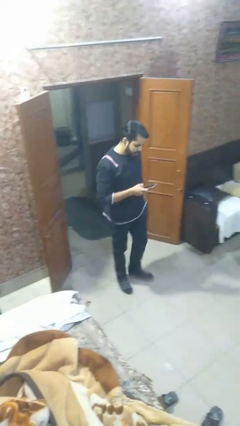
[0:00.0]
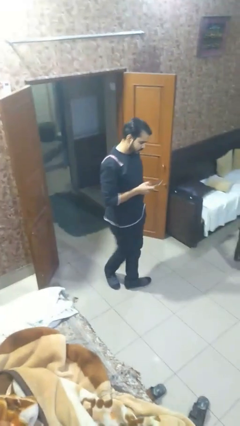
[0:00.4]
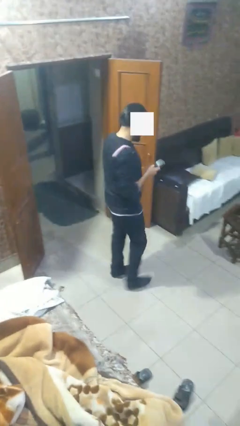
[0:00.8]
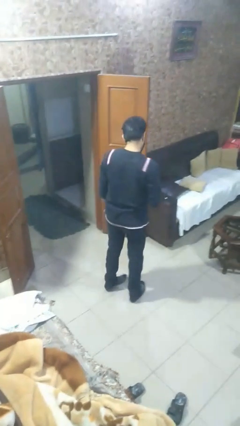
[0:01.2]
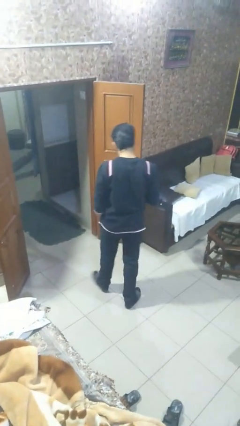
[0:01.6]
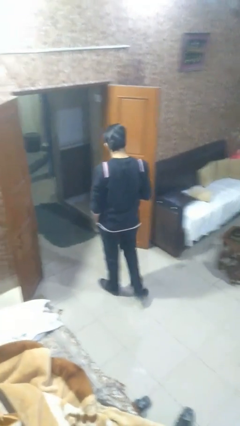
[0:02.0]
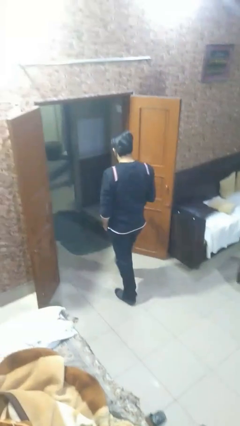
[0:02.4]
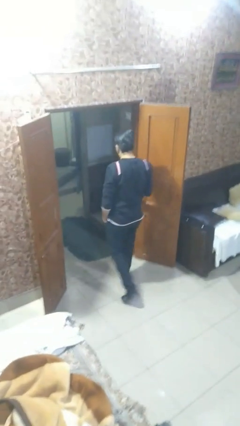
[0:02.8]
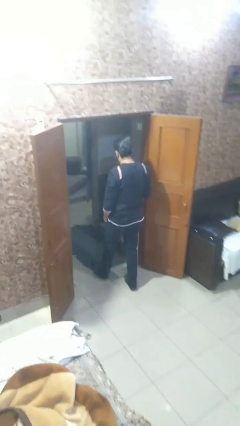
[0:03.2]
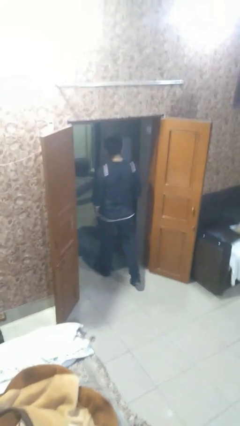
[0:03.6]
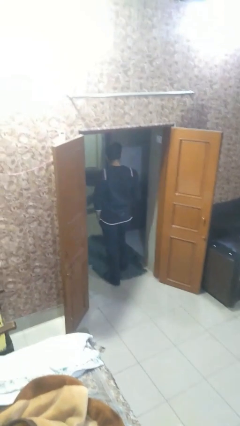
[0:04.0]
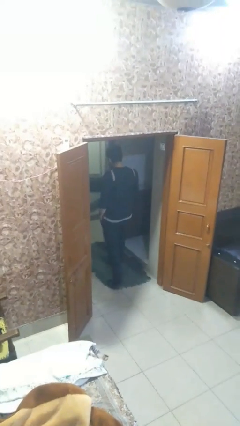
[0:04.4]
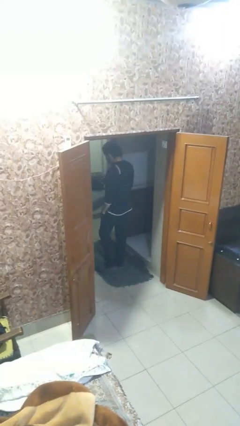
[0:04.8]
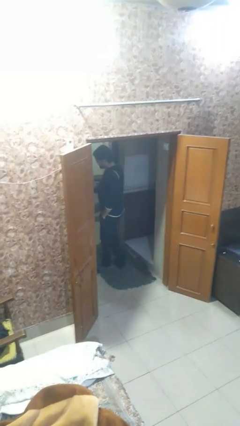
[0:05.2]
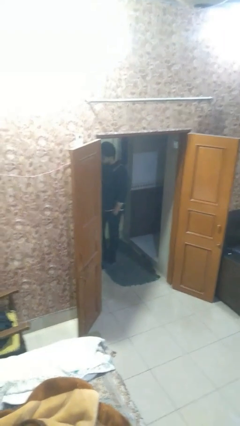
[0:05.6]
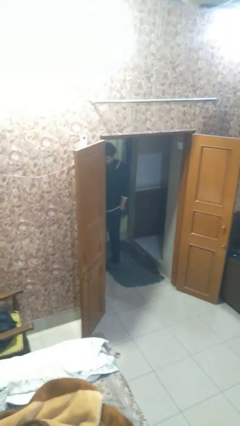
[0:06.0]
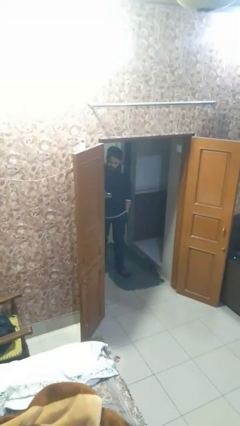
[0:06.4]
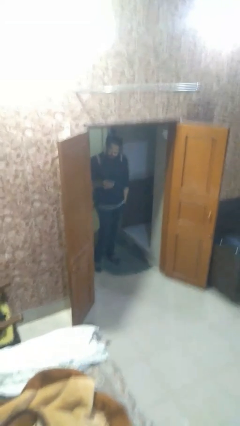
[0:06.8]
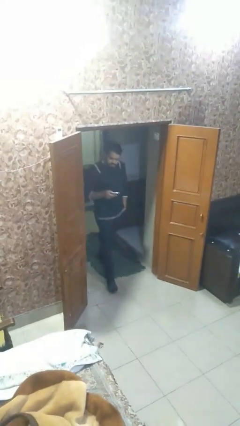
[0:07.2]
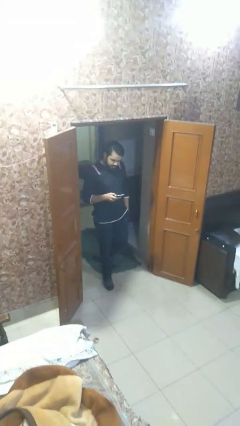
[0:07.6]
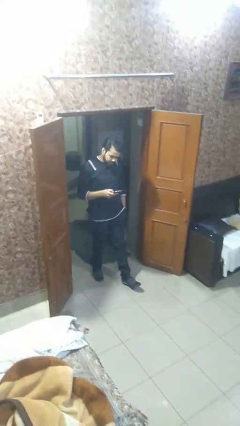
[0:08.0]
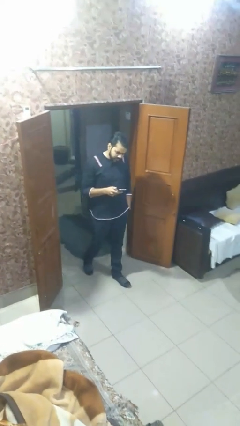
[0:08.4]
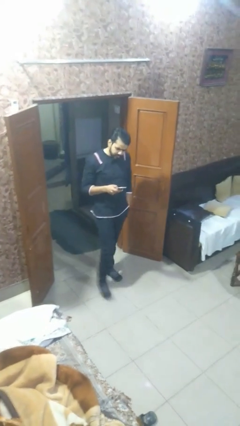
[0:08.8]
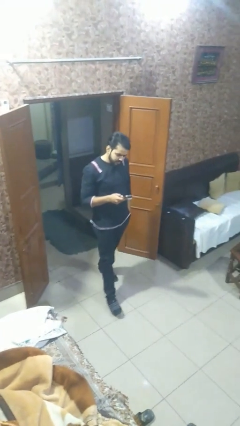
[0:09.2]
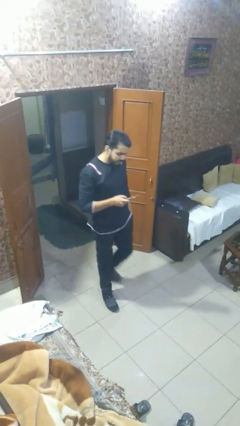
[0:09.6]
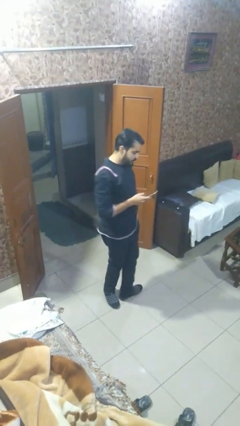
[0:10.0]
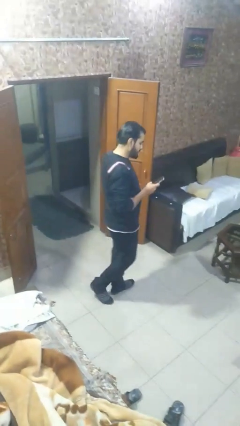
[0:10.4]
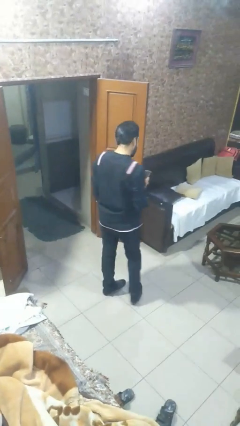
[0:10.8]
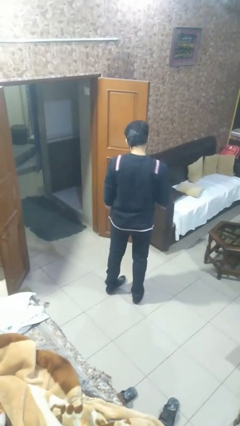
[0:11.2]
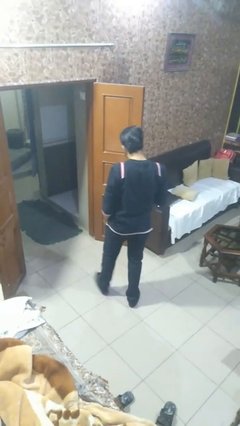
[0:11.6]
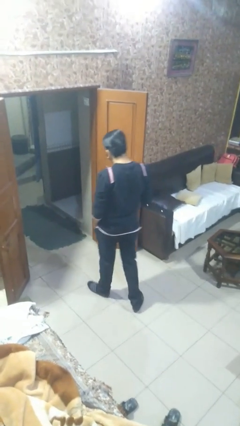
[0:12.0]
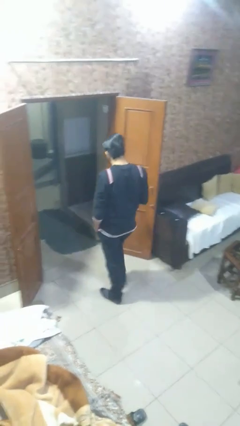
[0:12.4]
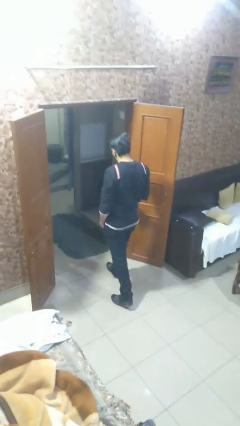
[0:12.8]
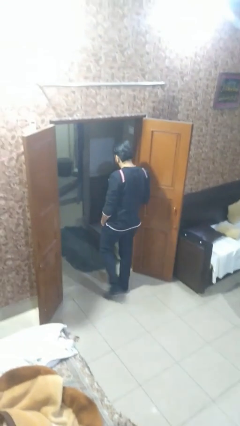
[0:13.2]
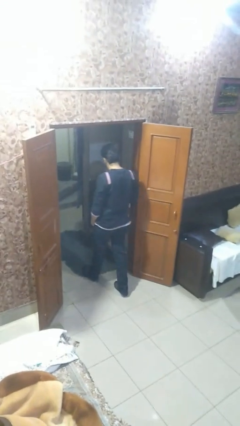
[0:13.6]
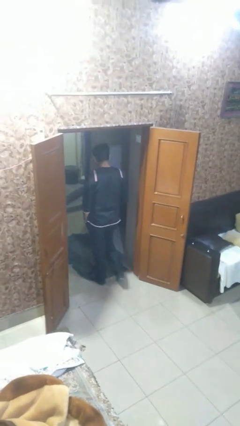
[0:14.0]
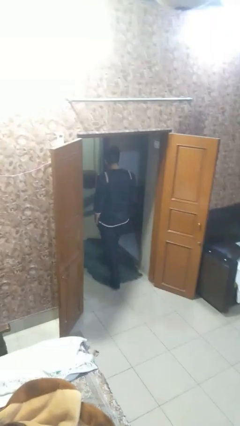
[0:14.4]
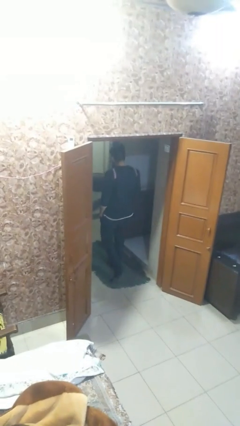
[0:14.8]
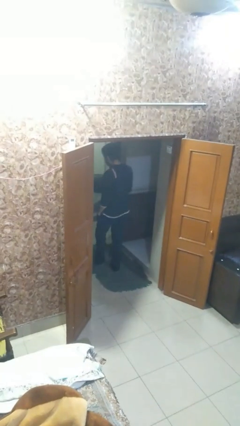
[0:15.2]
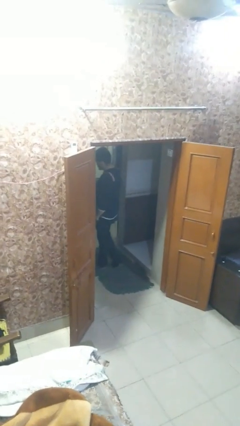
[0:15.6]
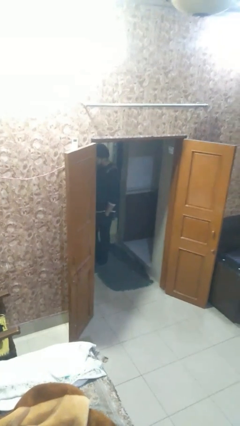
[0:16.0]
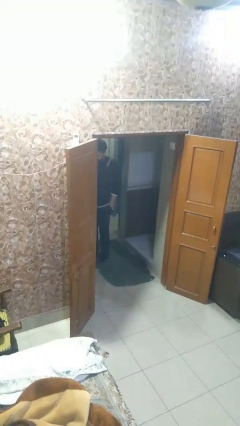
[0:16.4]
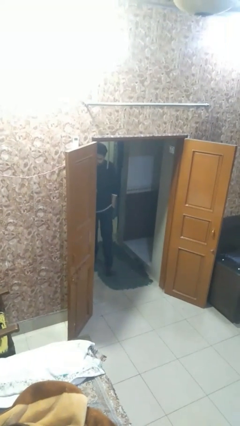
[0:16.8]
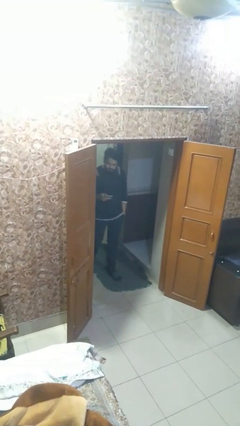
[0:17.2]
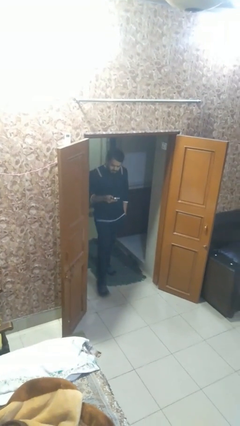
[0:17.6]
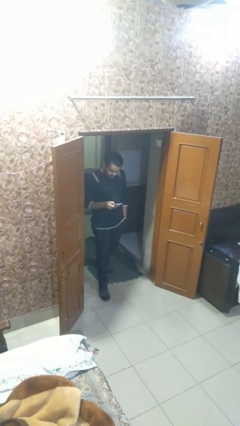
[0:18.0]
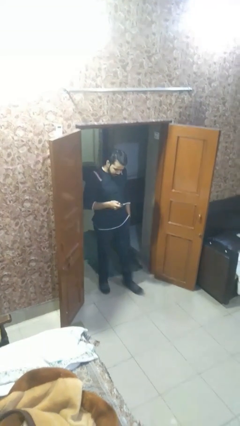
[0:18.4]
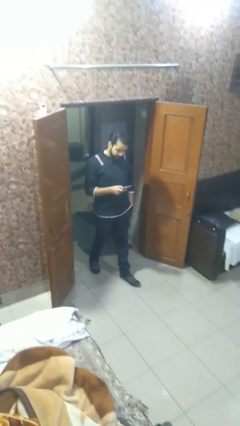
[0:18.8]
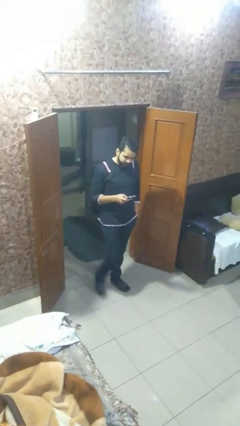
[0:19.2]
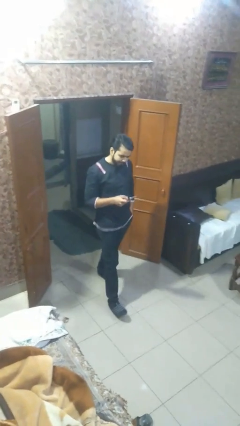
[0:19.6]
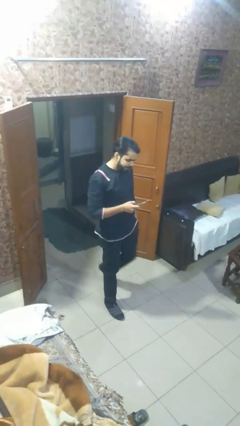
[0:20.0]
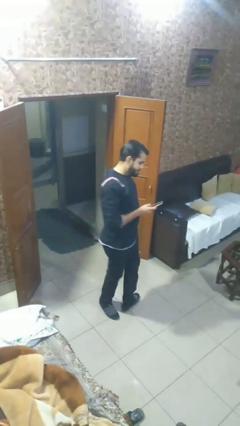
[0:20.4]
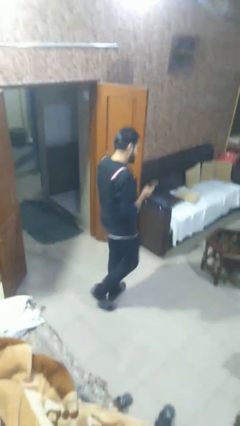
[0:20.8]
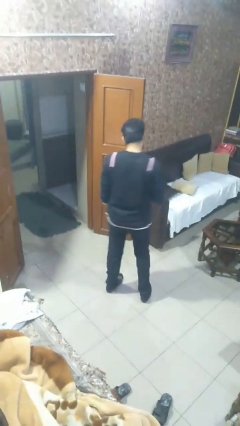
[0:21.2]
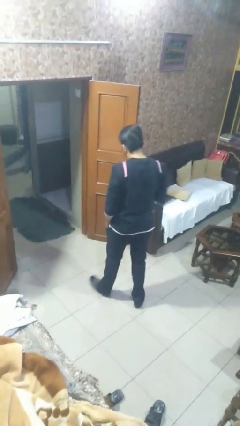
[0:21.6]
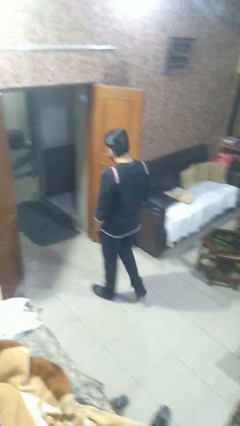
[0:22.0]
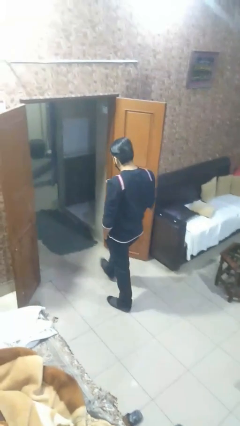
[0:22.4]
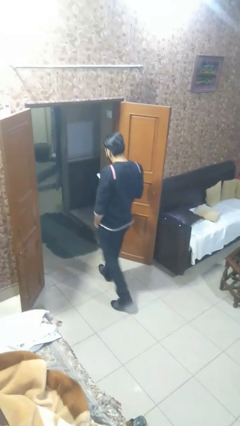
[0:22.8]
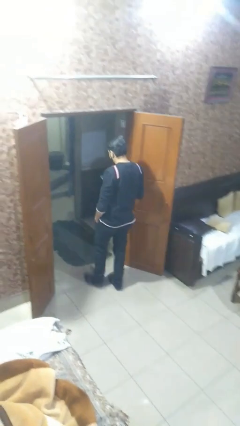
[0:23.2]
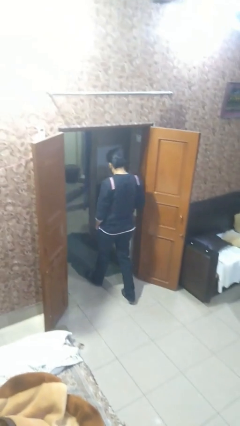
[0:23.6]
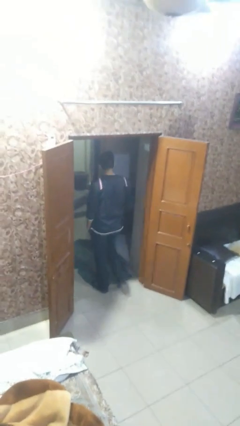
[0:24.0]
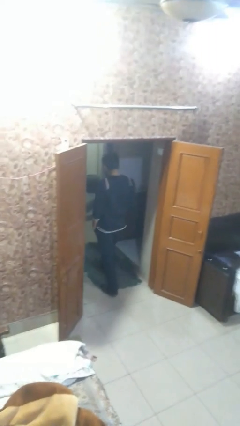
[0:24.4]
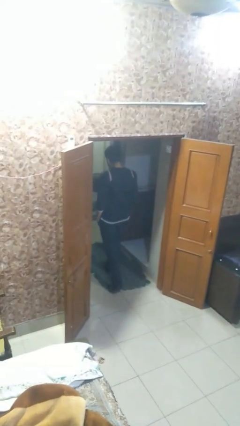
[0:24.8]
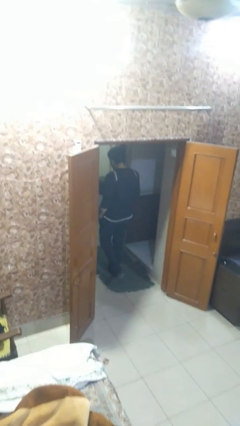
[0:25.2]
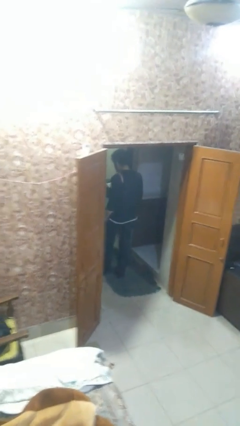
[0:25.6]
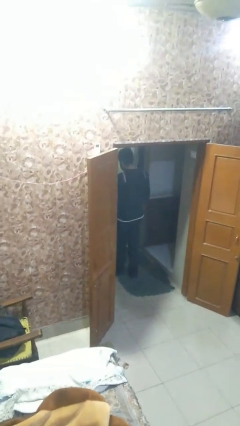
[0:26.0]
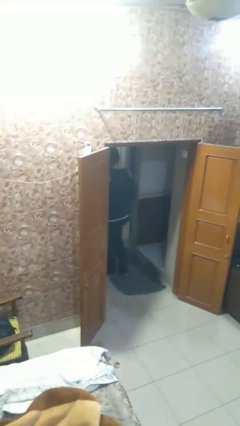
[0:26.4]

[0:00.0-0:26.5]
person texts on phone

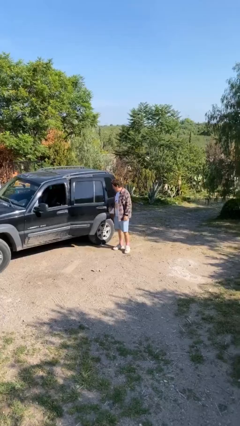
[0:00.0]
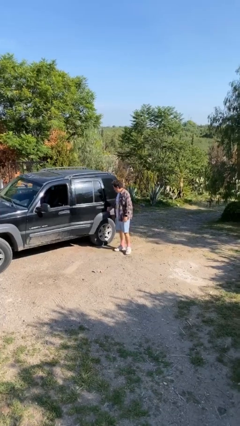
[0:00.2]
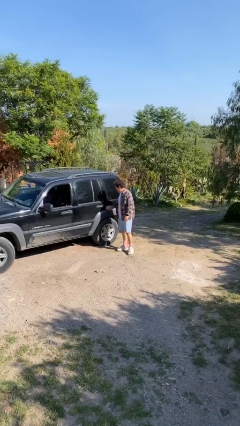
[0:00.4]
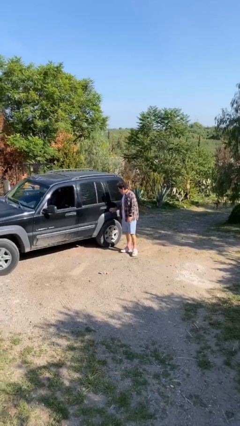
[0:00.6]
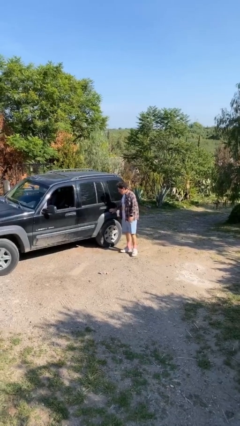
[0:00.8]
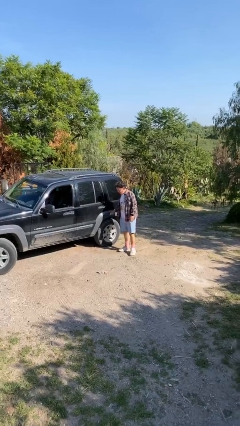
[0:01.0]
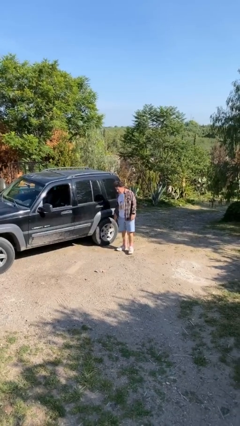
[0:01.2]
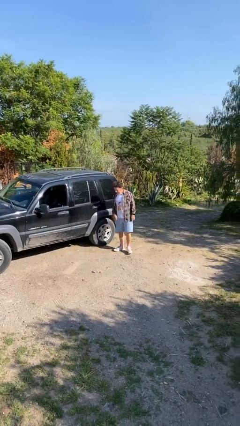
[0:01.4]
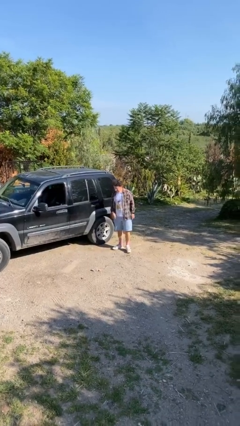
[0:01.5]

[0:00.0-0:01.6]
person closes car door

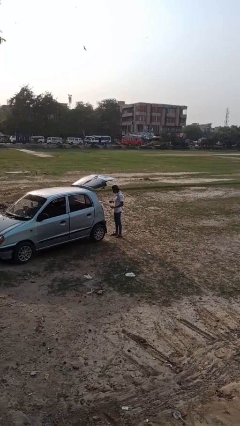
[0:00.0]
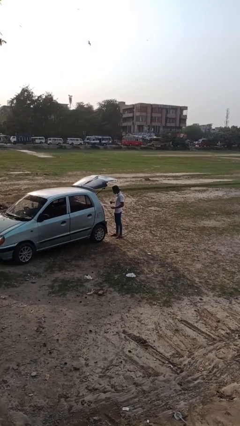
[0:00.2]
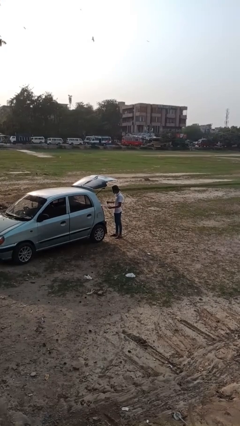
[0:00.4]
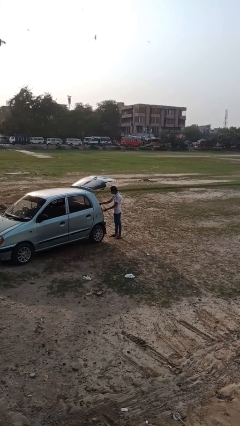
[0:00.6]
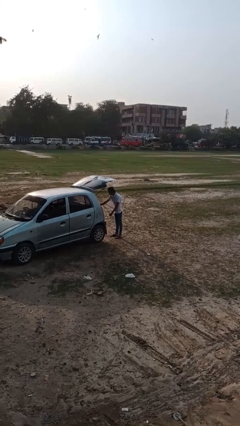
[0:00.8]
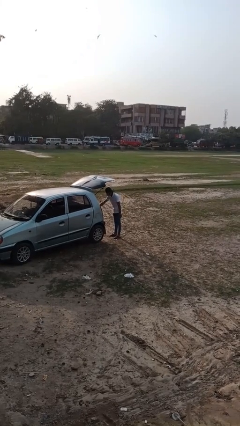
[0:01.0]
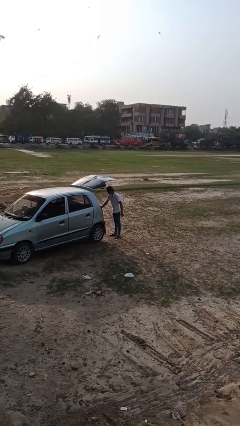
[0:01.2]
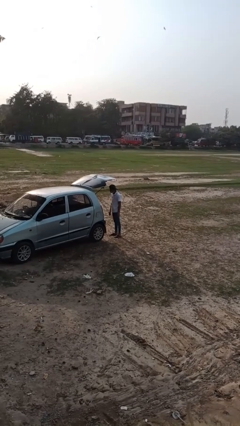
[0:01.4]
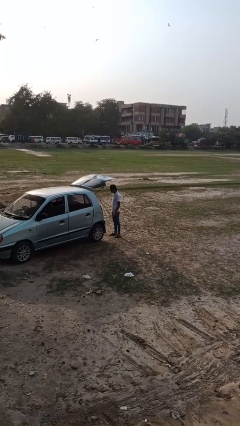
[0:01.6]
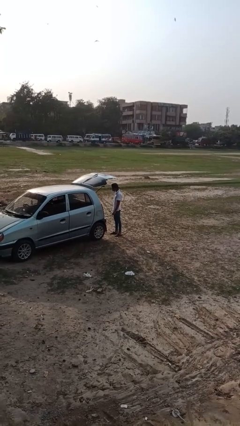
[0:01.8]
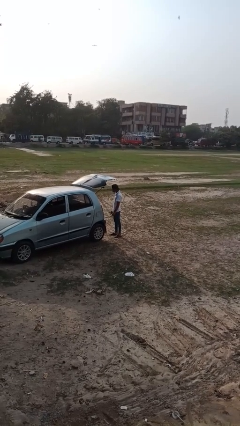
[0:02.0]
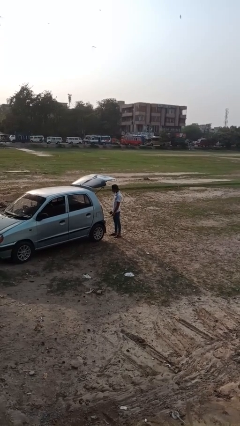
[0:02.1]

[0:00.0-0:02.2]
person loads car

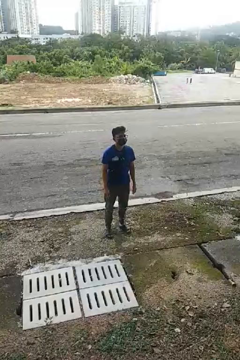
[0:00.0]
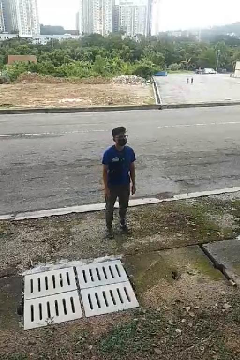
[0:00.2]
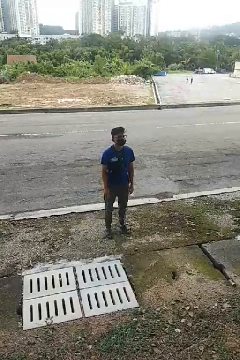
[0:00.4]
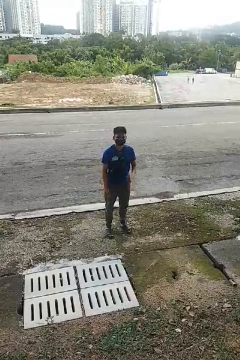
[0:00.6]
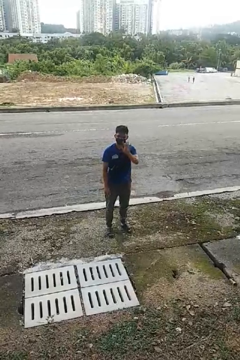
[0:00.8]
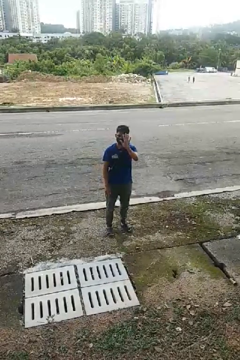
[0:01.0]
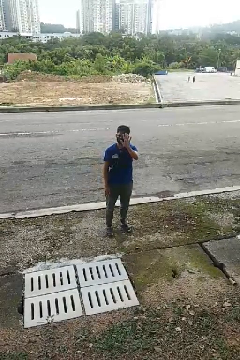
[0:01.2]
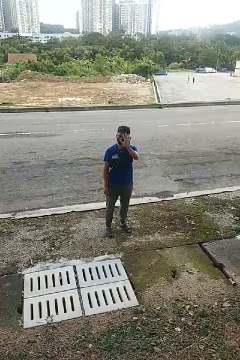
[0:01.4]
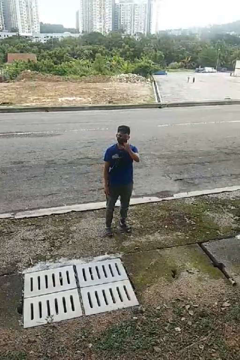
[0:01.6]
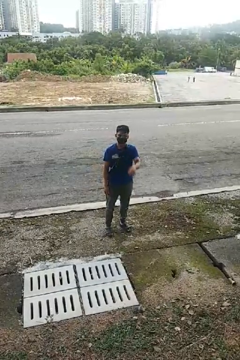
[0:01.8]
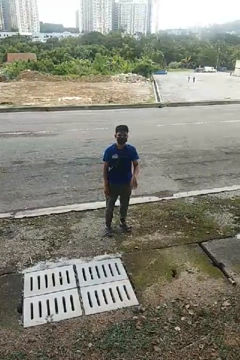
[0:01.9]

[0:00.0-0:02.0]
person gestures stop
